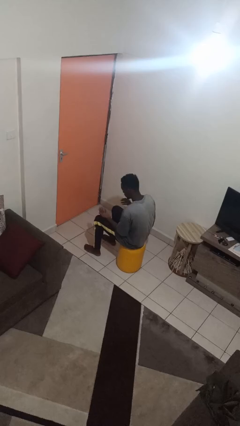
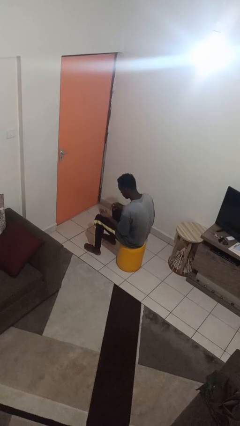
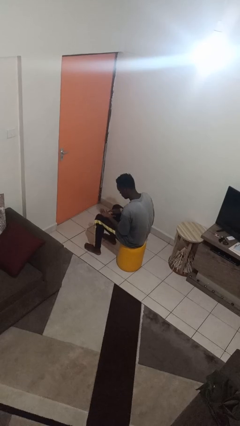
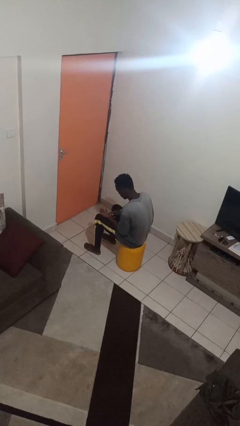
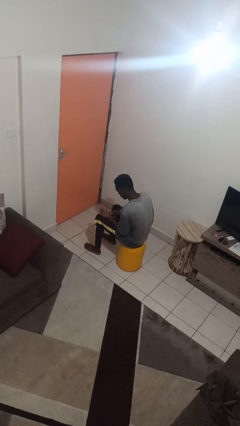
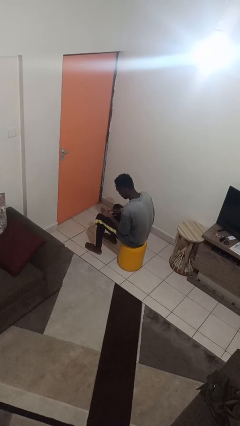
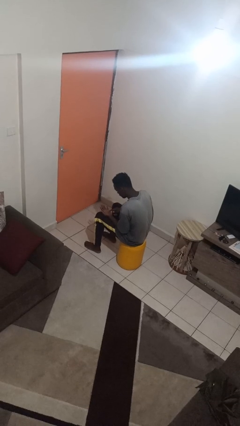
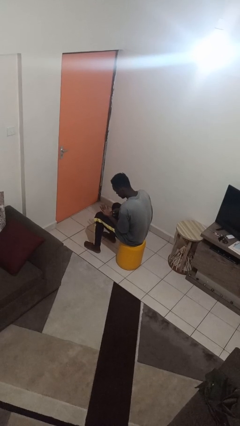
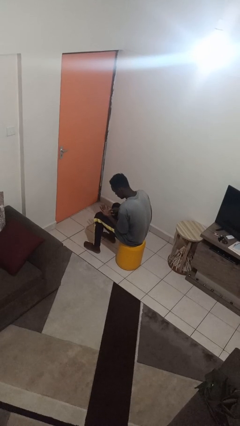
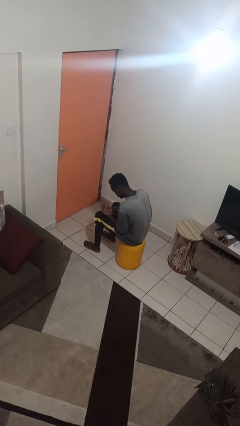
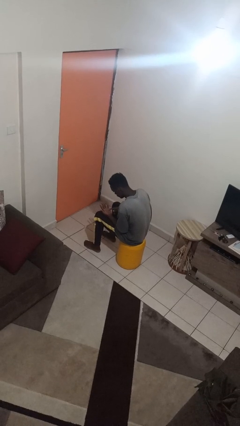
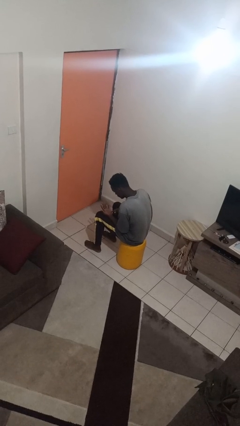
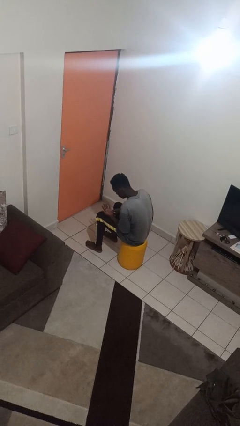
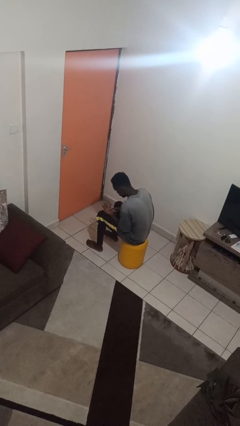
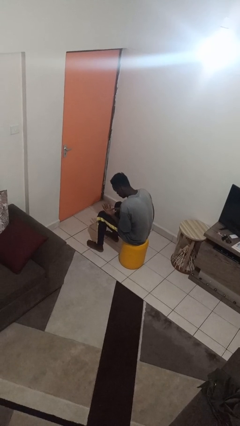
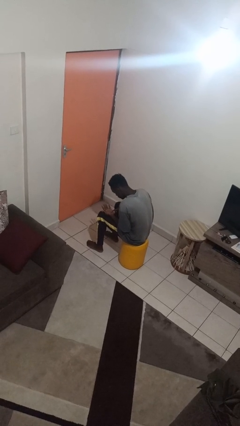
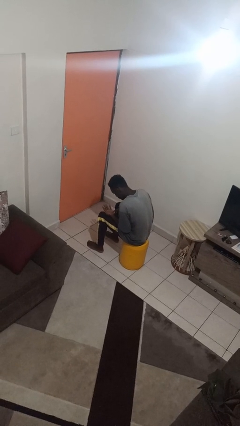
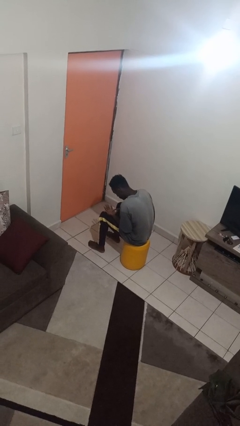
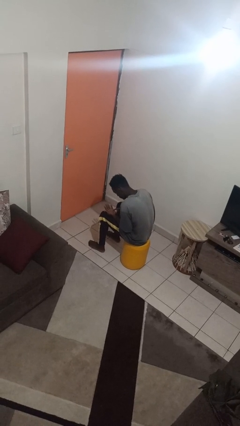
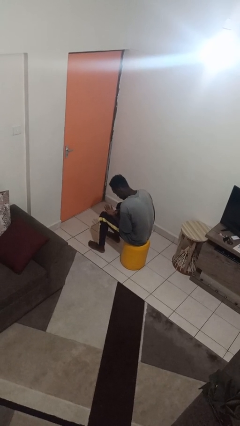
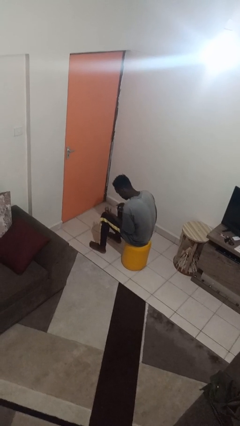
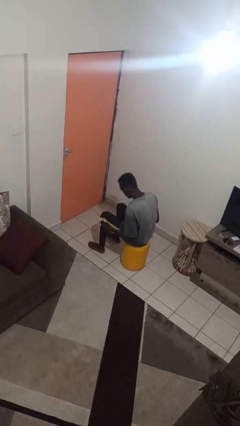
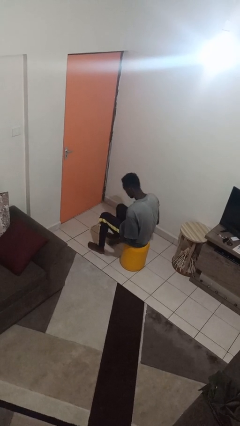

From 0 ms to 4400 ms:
person looks at hands in lap

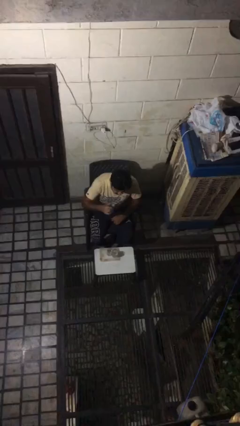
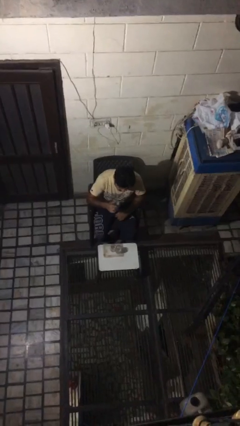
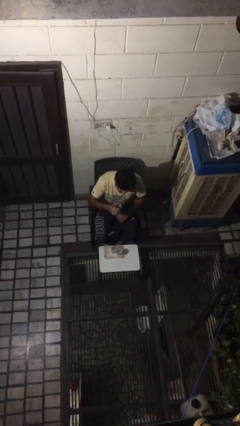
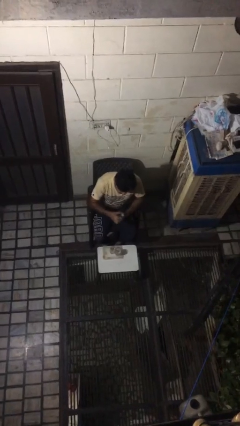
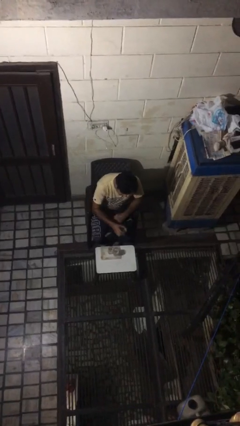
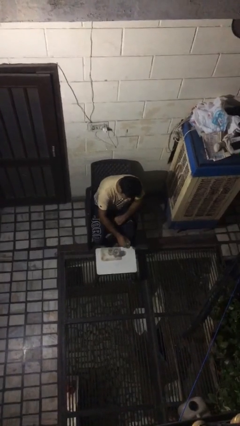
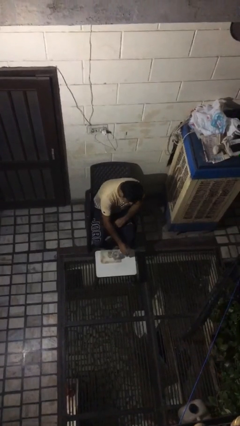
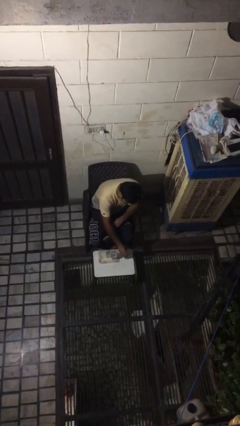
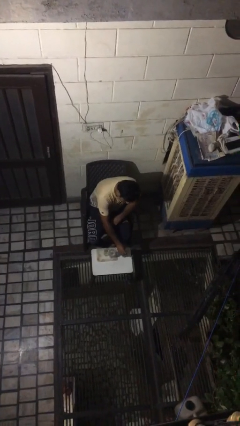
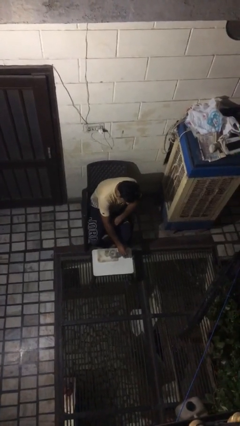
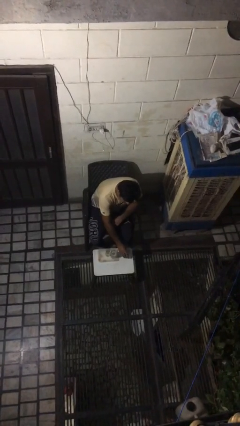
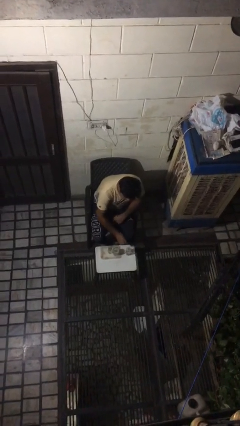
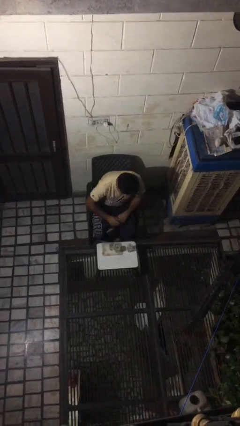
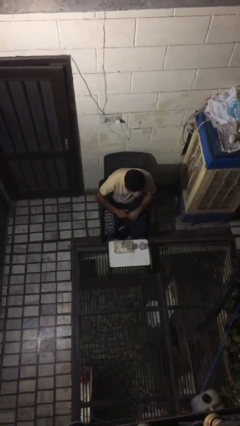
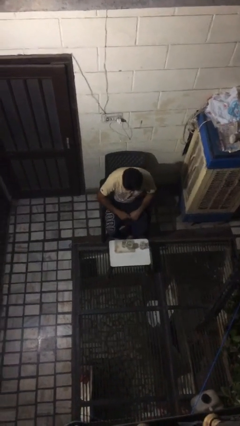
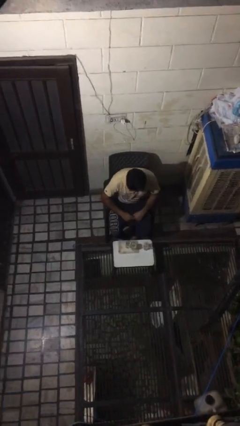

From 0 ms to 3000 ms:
person puts down object on table

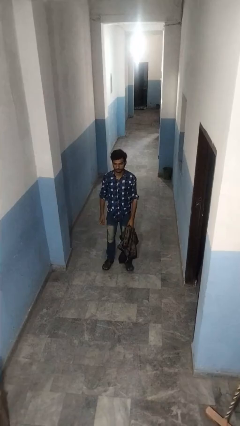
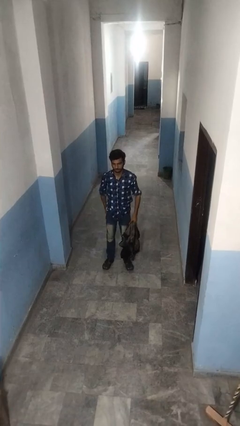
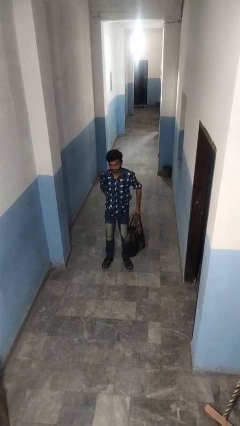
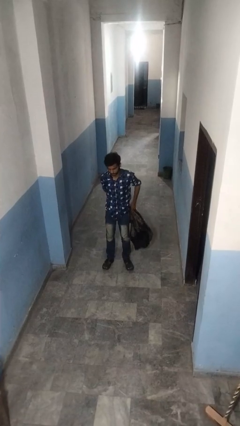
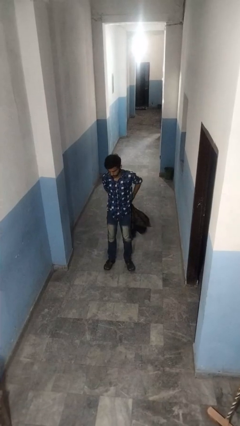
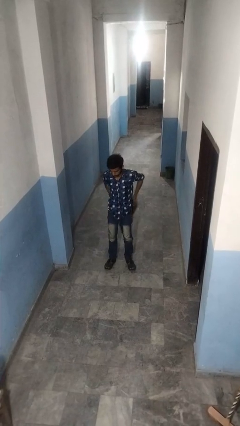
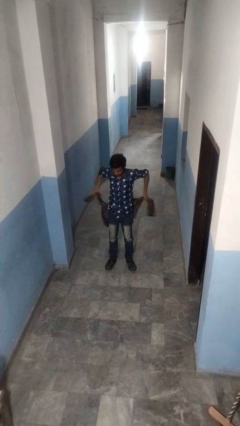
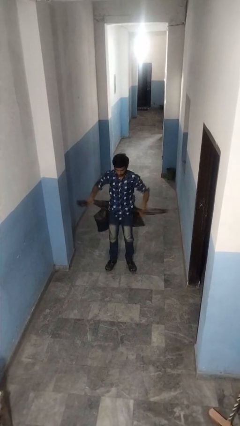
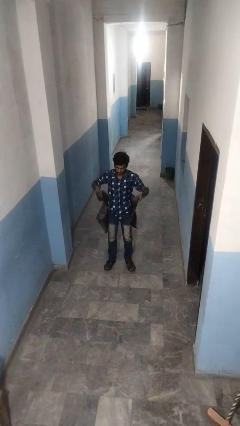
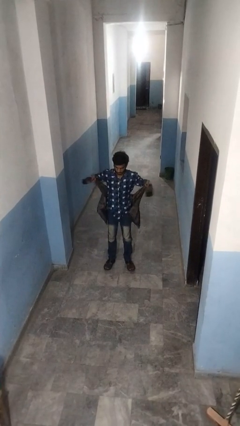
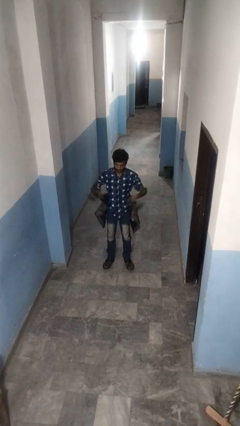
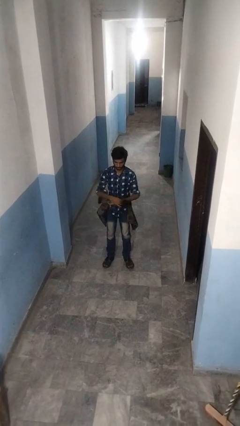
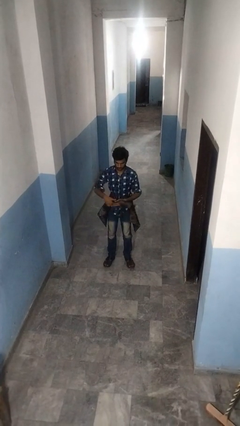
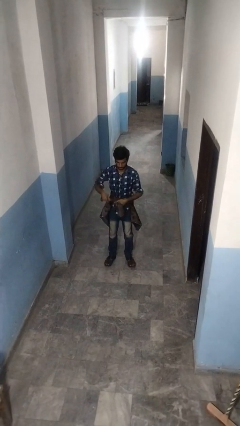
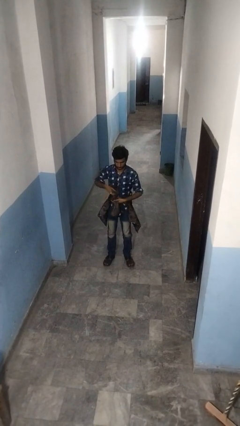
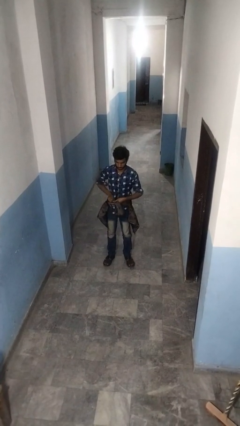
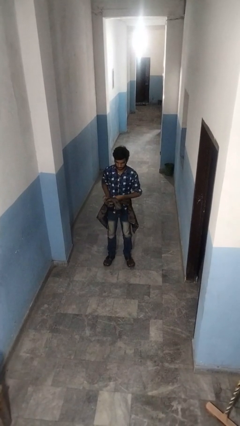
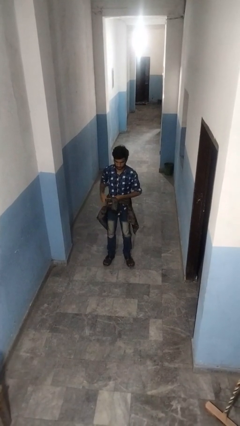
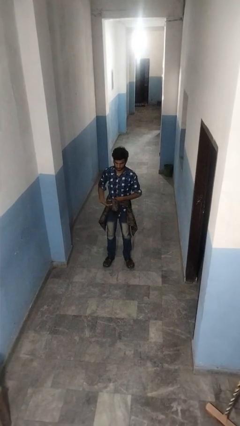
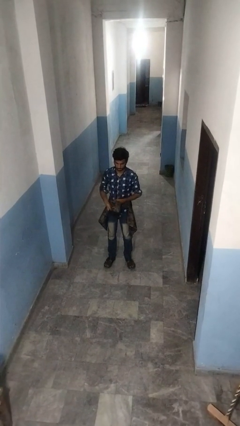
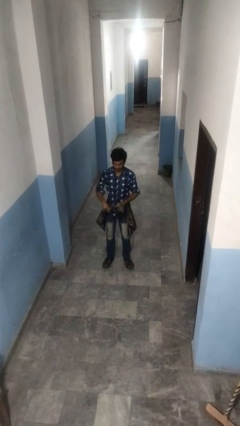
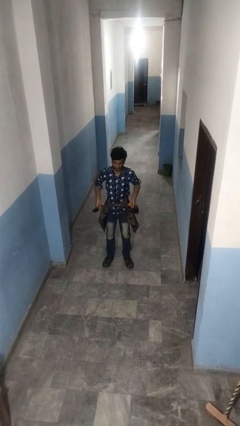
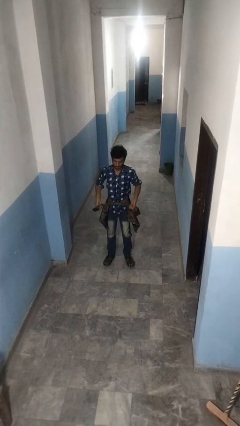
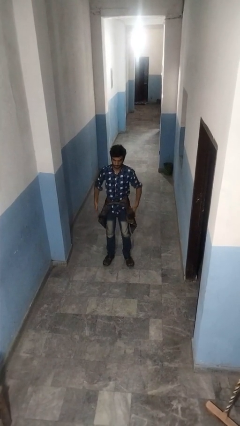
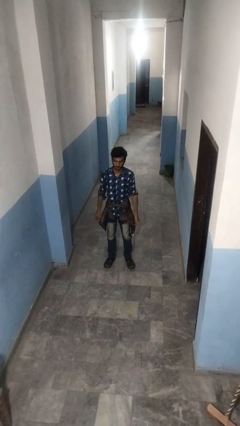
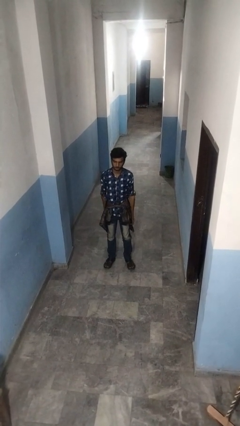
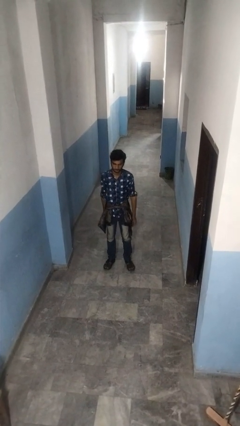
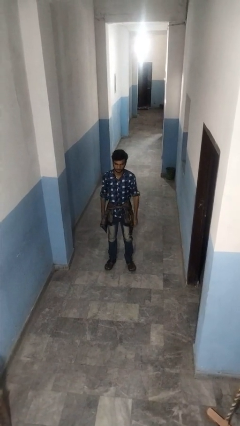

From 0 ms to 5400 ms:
person ties jacket around waist

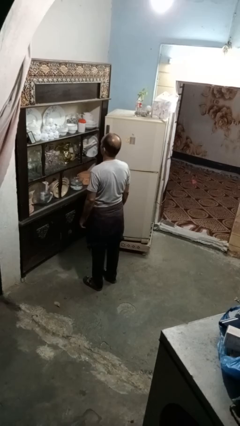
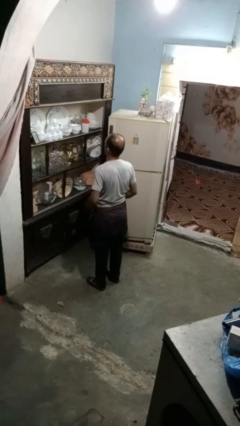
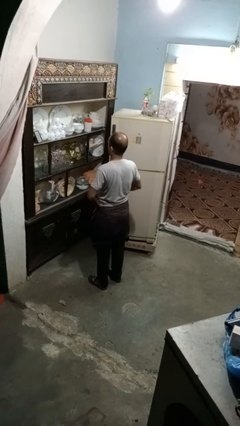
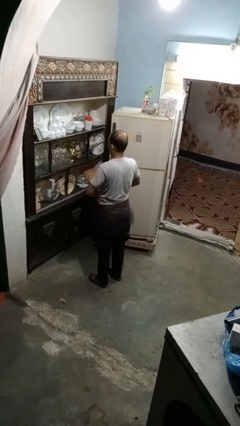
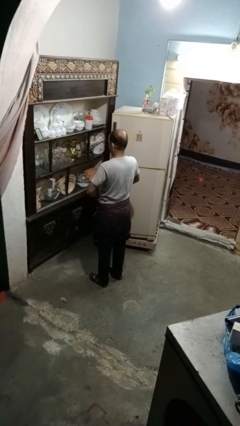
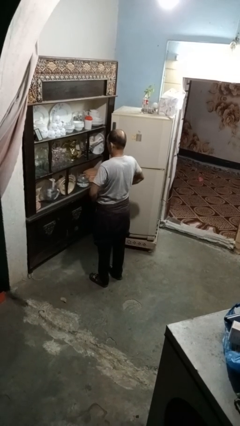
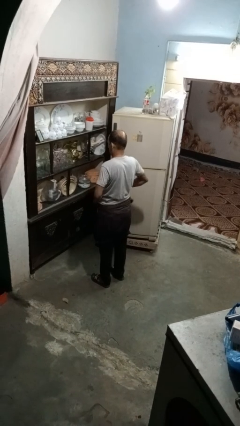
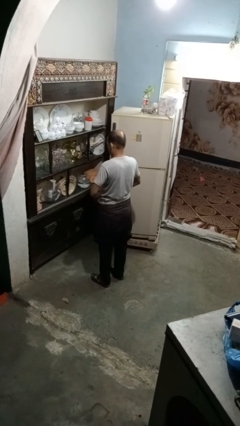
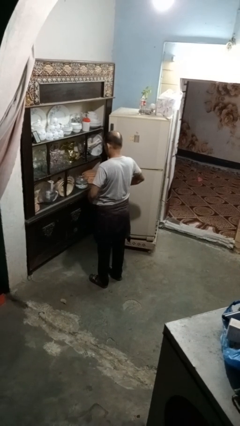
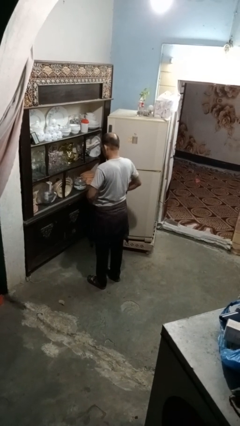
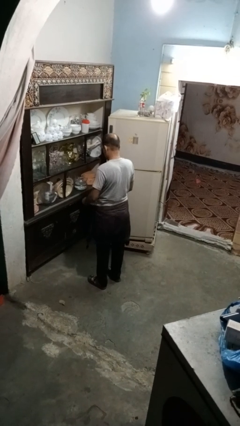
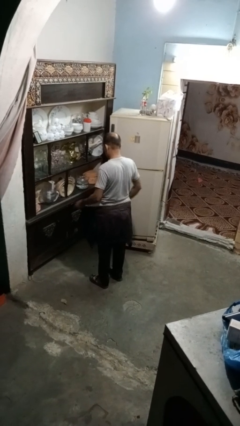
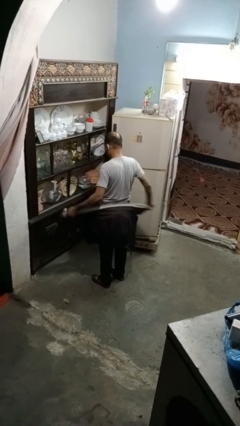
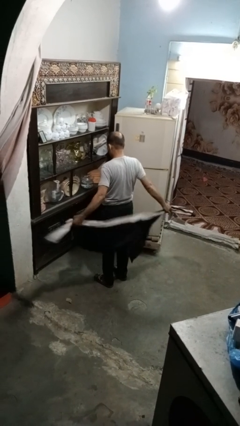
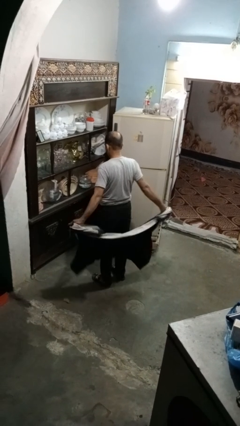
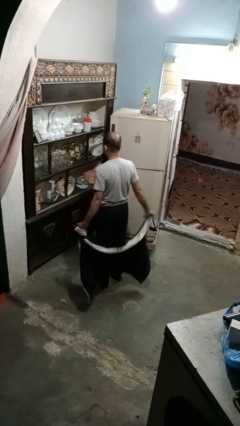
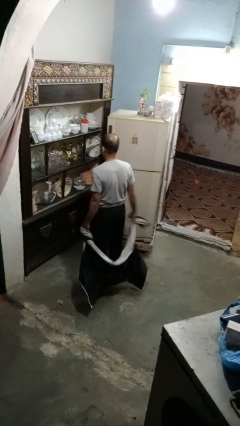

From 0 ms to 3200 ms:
person unties jacket around waist

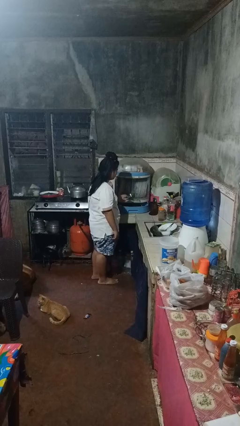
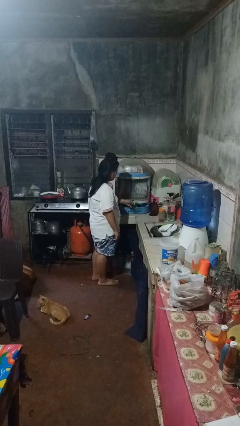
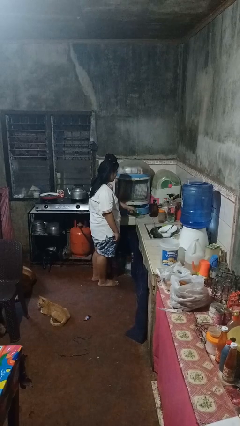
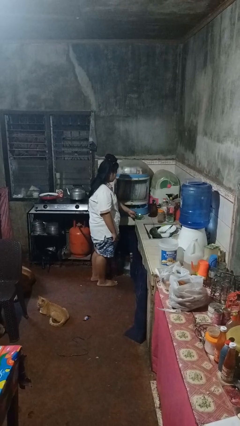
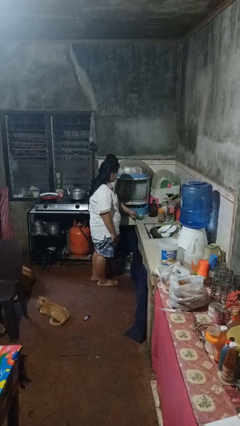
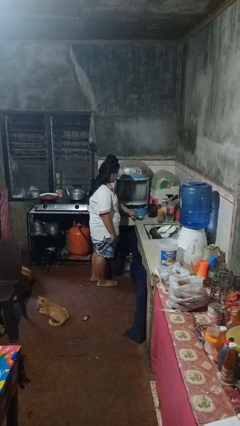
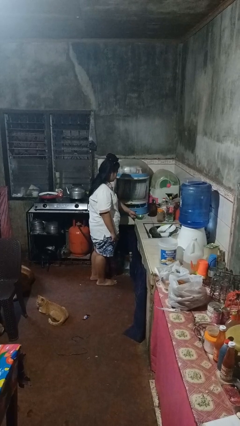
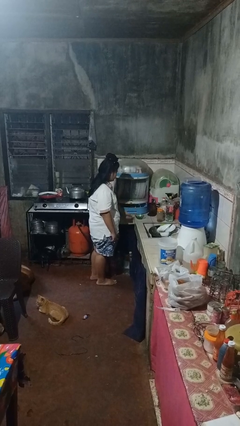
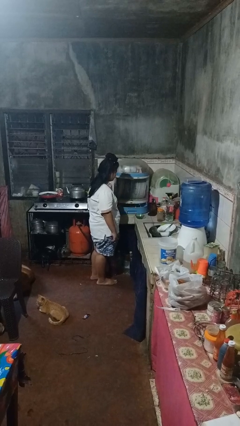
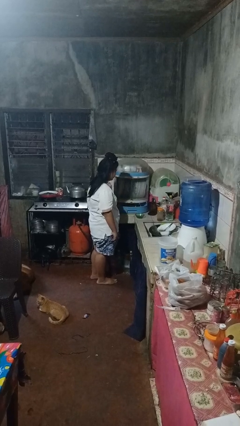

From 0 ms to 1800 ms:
person takes object from kitchen drawer

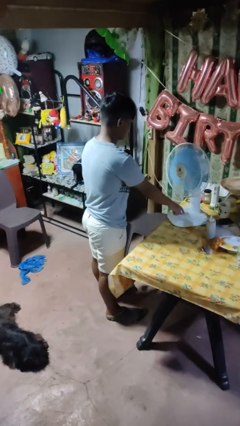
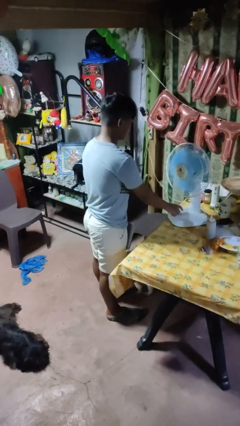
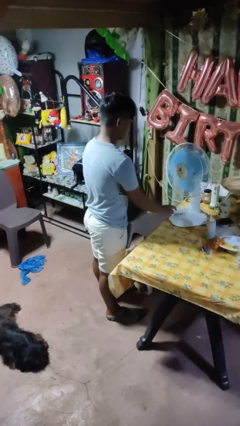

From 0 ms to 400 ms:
person turns off fan
